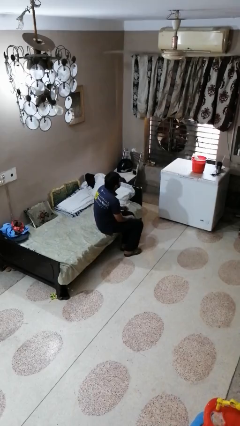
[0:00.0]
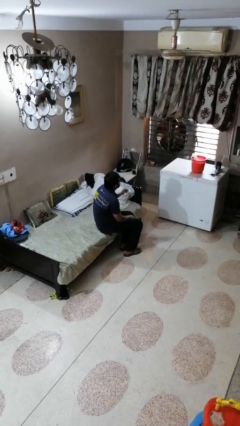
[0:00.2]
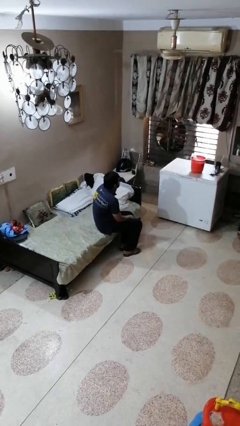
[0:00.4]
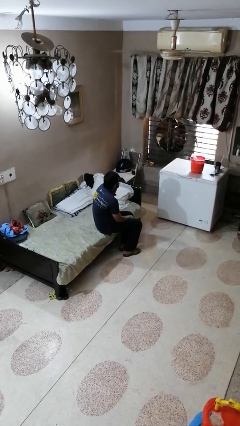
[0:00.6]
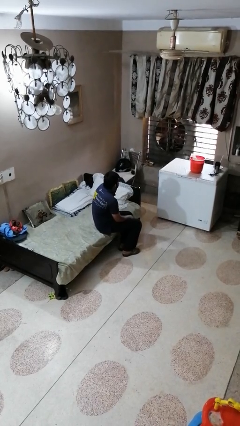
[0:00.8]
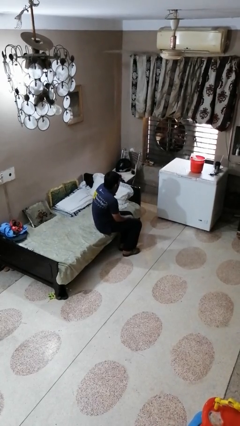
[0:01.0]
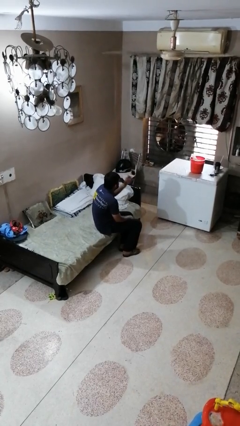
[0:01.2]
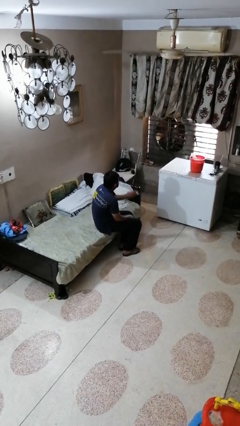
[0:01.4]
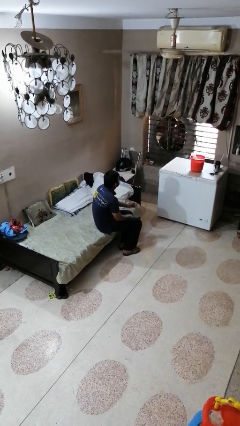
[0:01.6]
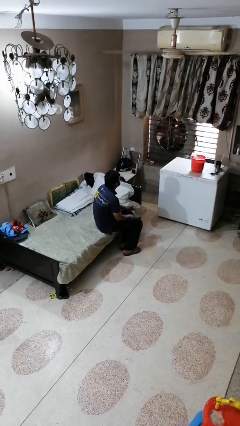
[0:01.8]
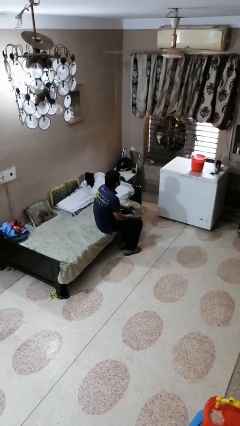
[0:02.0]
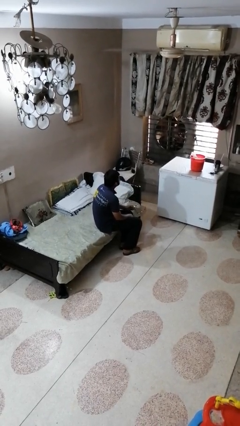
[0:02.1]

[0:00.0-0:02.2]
person takes off glasses

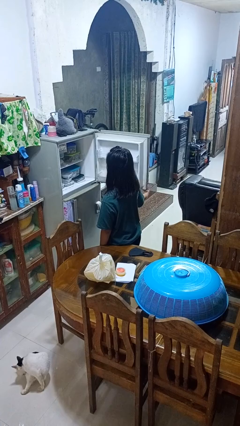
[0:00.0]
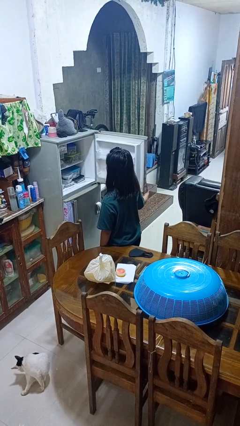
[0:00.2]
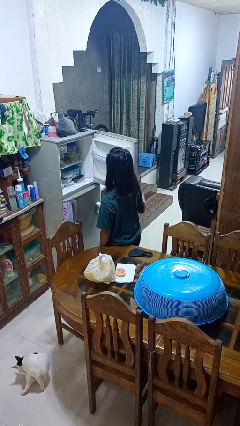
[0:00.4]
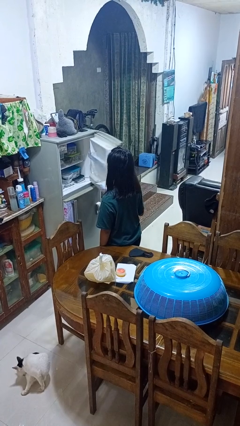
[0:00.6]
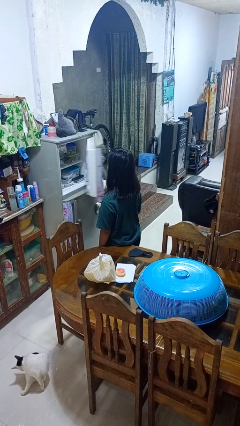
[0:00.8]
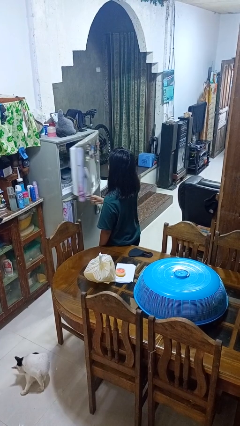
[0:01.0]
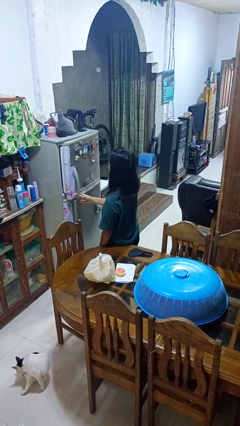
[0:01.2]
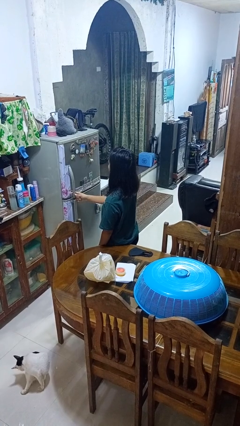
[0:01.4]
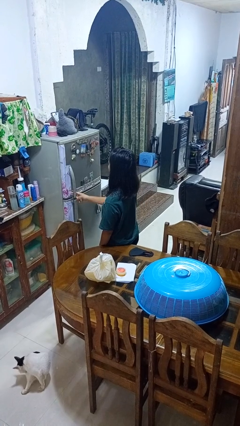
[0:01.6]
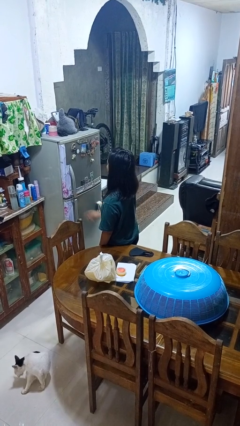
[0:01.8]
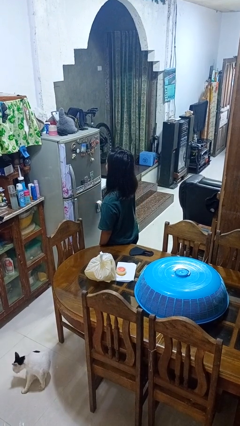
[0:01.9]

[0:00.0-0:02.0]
person closes refrigerator

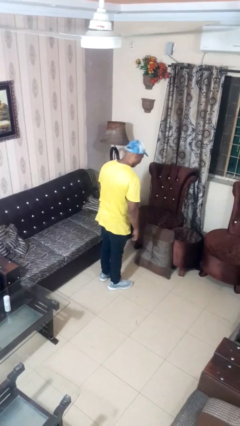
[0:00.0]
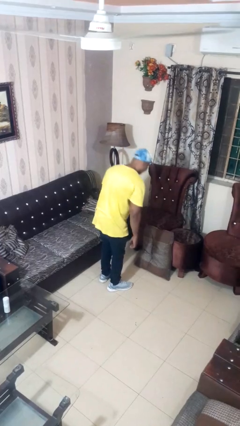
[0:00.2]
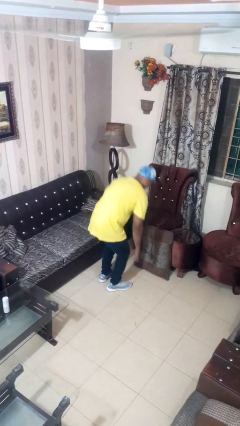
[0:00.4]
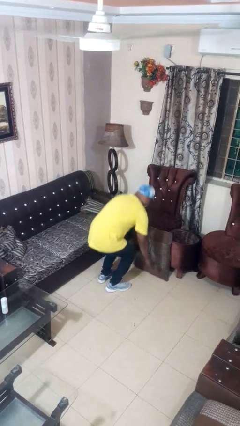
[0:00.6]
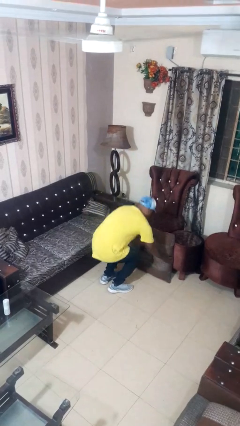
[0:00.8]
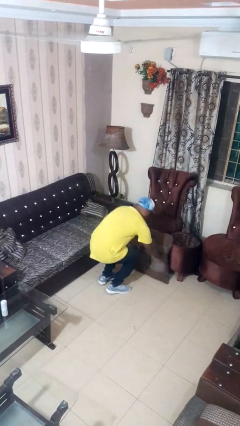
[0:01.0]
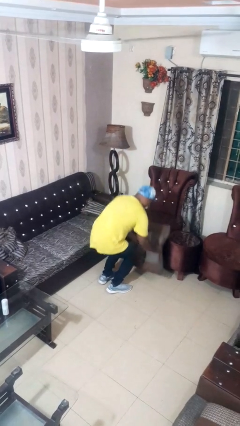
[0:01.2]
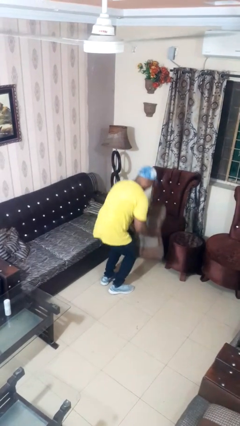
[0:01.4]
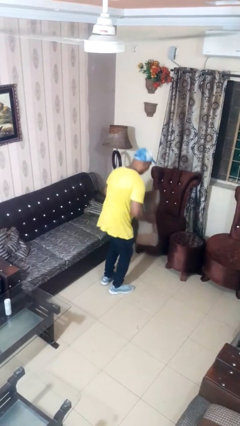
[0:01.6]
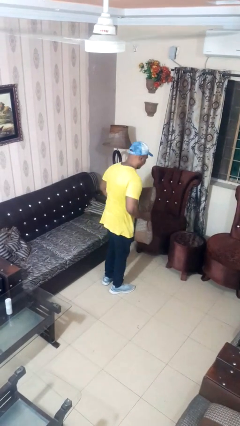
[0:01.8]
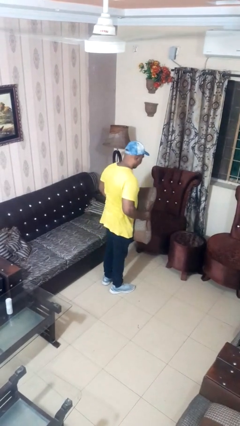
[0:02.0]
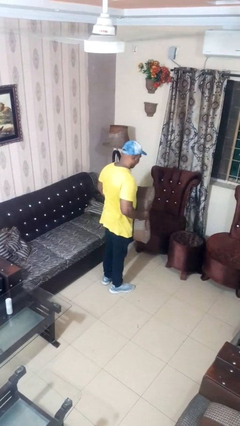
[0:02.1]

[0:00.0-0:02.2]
person picks up object from floor

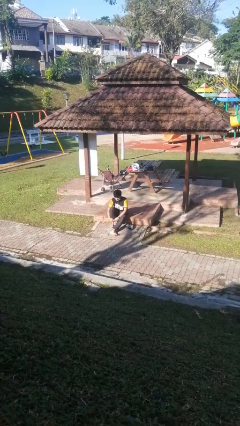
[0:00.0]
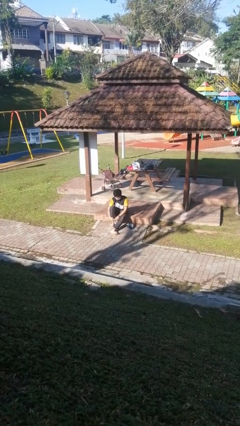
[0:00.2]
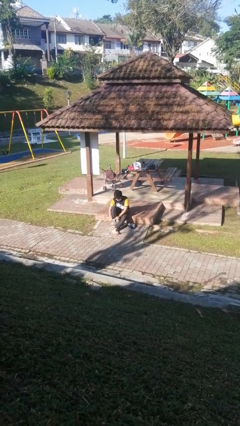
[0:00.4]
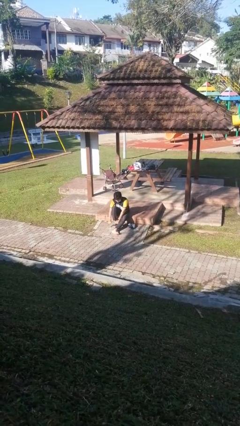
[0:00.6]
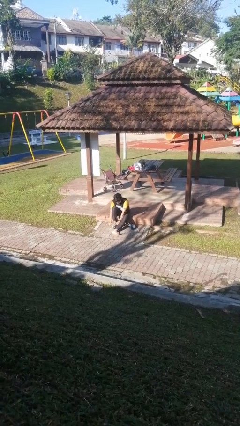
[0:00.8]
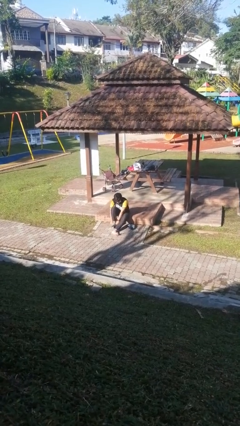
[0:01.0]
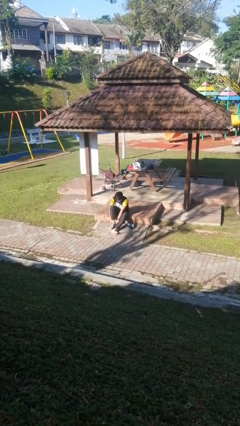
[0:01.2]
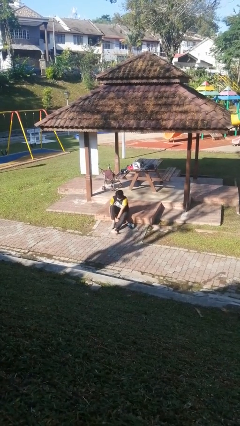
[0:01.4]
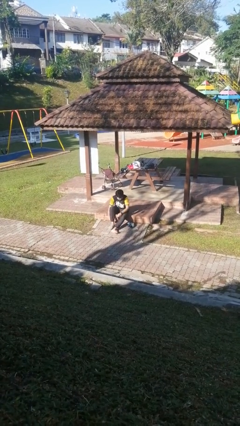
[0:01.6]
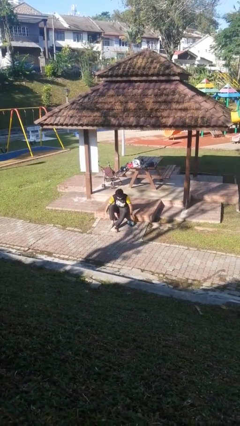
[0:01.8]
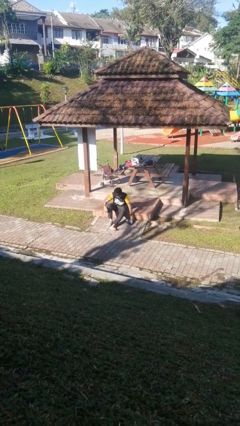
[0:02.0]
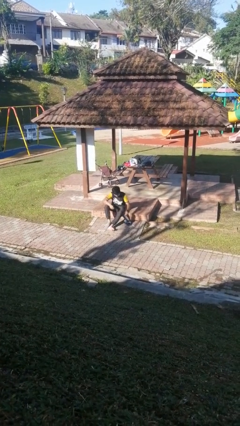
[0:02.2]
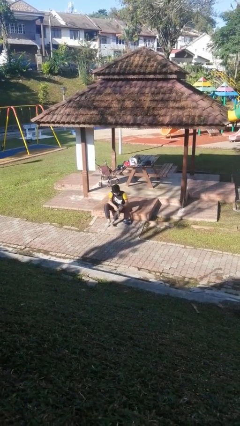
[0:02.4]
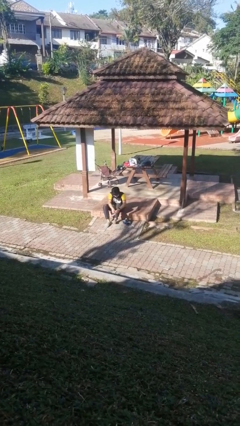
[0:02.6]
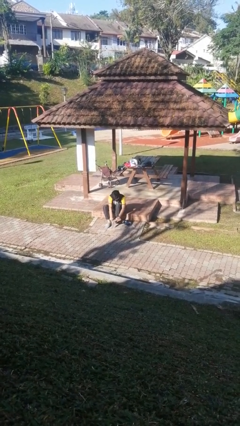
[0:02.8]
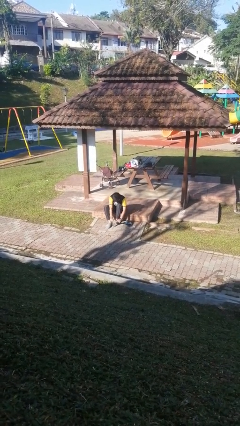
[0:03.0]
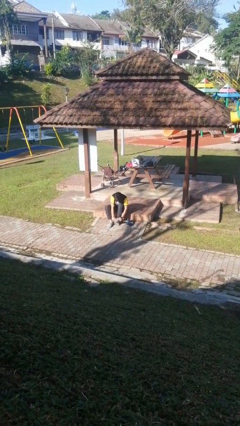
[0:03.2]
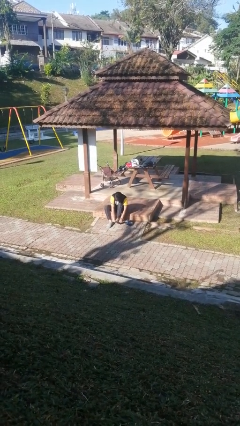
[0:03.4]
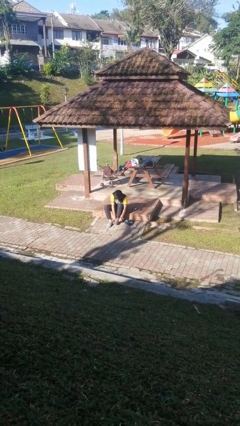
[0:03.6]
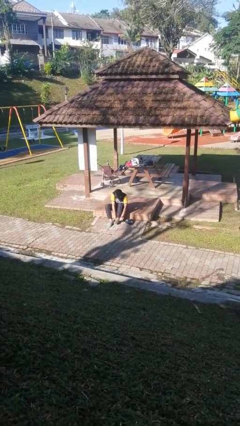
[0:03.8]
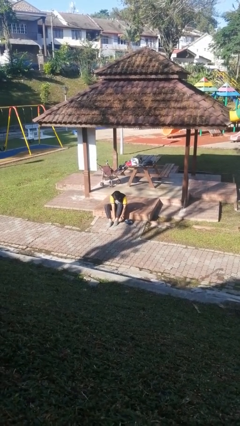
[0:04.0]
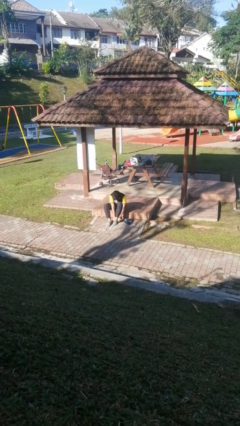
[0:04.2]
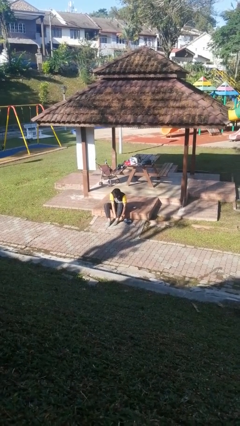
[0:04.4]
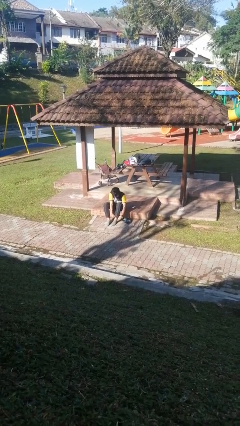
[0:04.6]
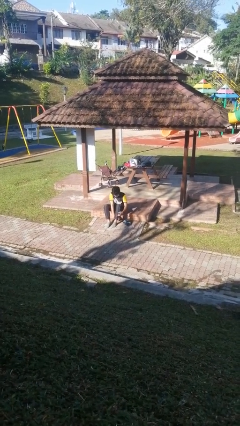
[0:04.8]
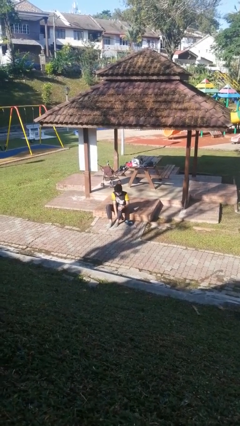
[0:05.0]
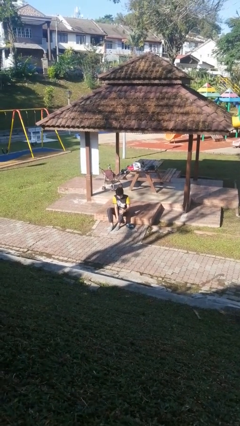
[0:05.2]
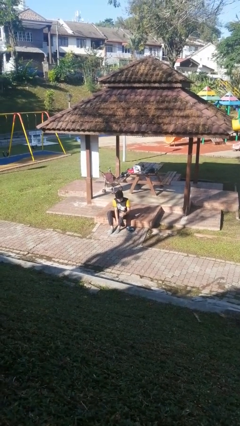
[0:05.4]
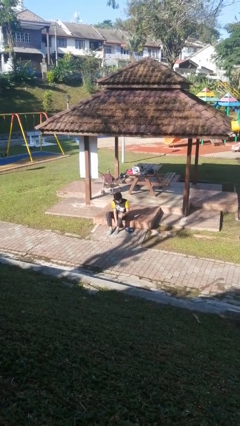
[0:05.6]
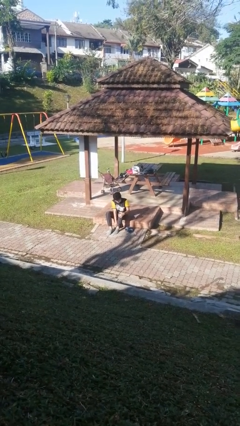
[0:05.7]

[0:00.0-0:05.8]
person puts on socks

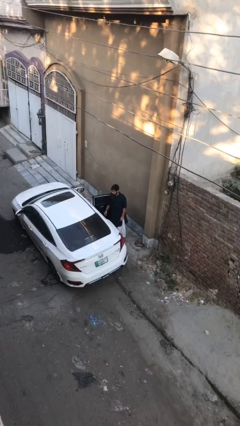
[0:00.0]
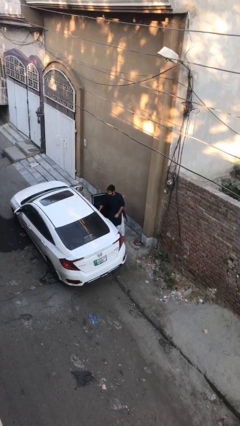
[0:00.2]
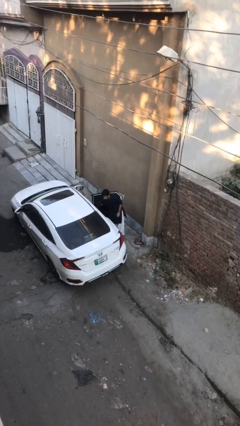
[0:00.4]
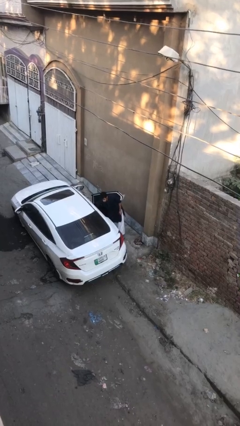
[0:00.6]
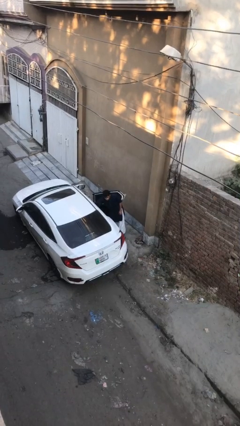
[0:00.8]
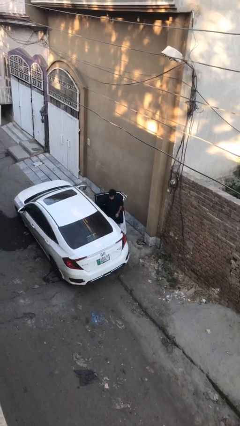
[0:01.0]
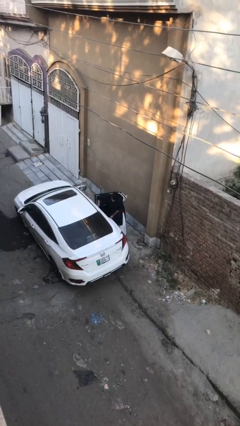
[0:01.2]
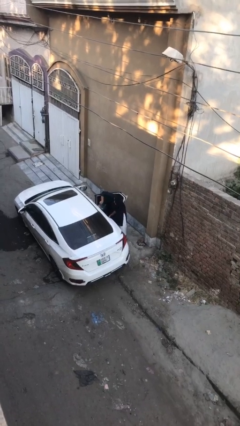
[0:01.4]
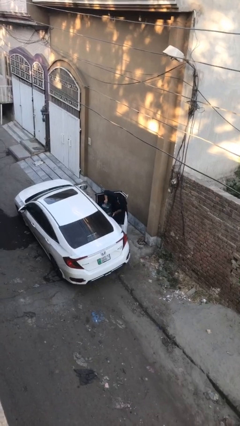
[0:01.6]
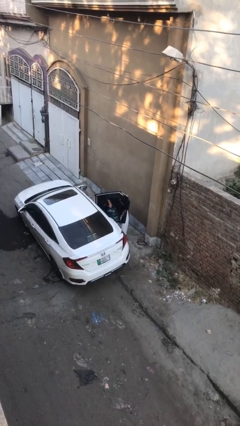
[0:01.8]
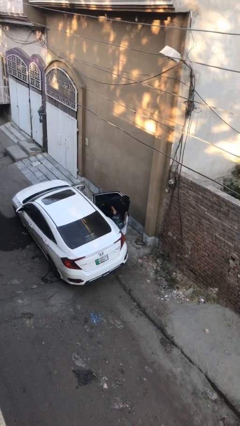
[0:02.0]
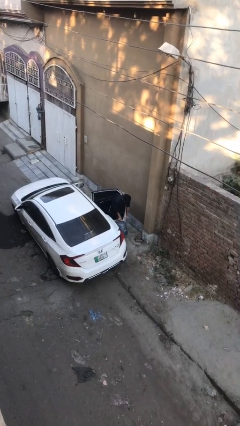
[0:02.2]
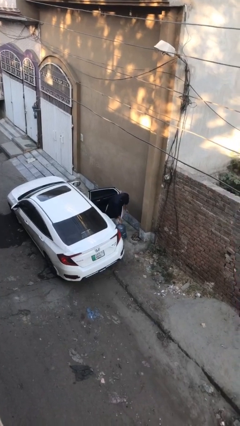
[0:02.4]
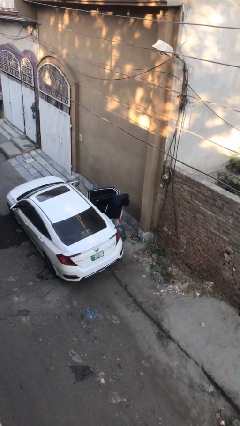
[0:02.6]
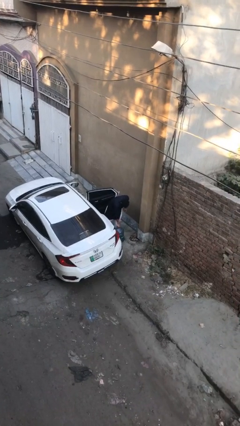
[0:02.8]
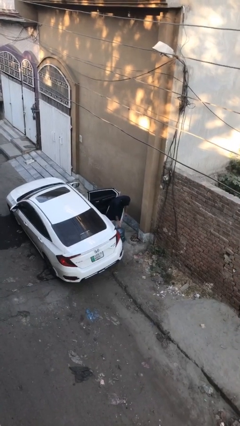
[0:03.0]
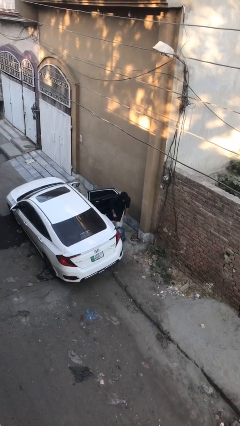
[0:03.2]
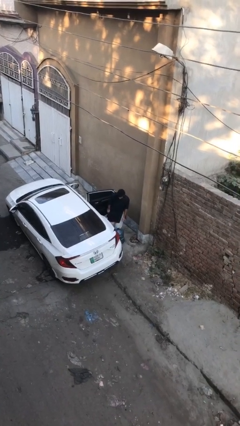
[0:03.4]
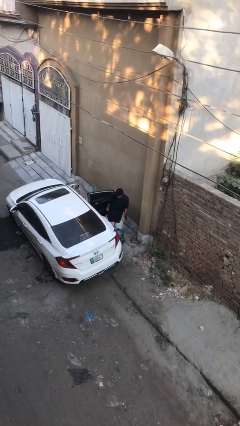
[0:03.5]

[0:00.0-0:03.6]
person unloads car

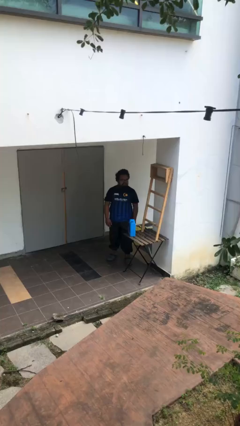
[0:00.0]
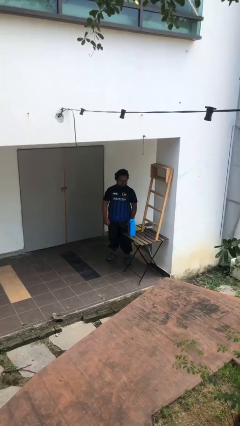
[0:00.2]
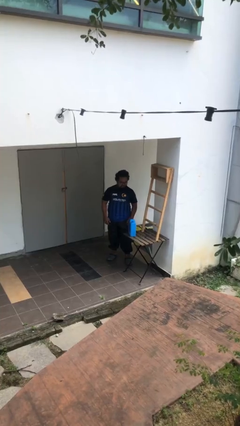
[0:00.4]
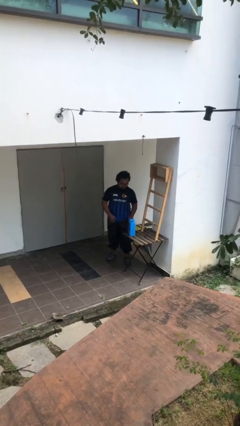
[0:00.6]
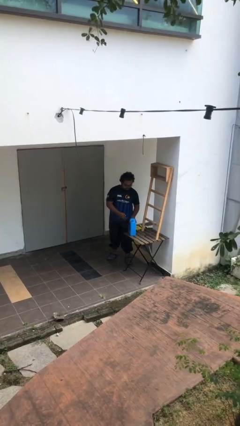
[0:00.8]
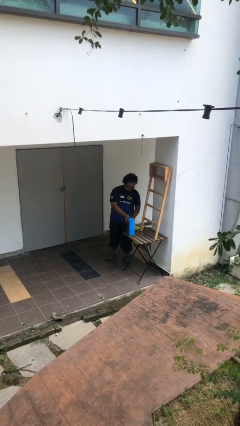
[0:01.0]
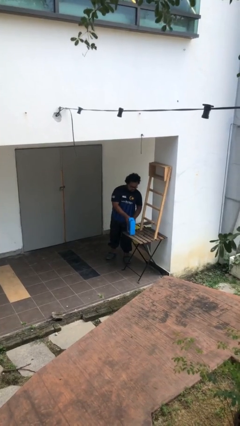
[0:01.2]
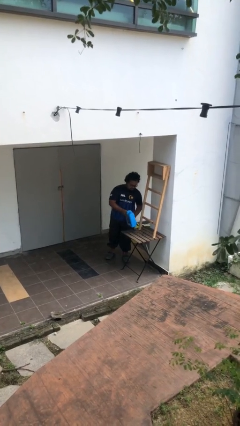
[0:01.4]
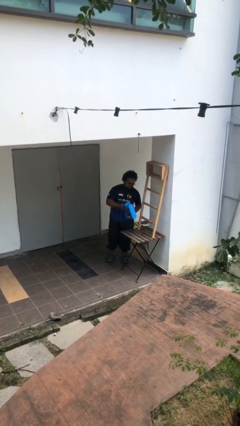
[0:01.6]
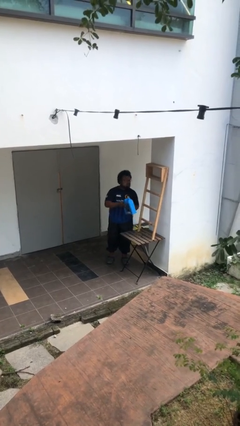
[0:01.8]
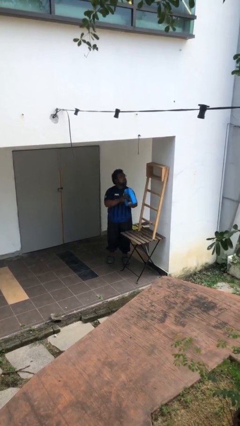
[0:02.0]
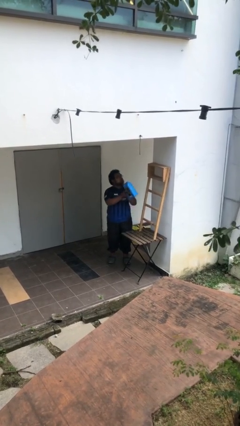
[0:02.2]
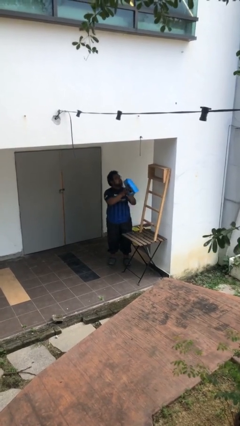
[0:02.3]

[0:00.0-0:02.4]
person picks up object from table
